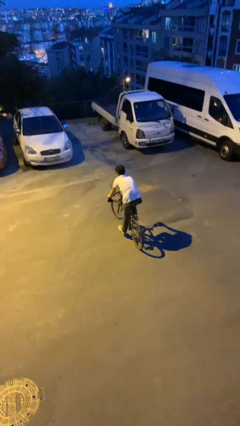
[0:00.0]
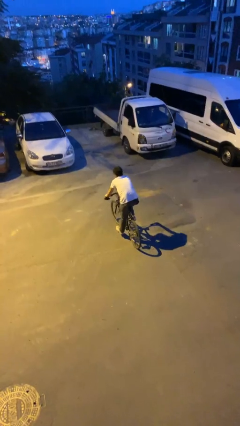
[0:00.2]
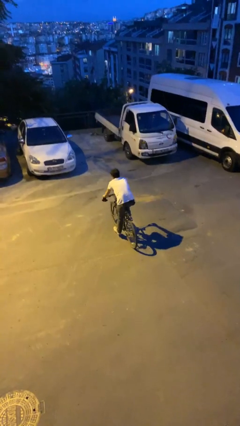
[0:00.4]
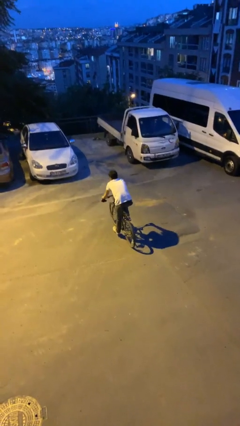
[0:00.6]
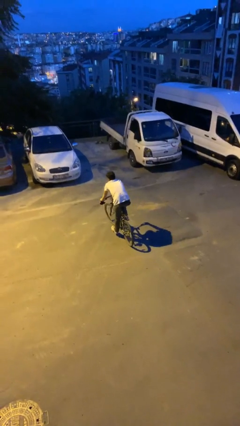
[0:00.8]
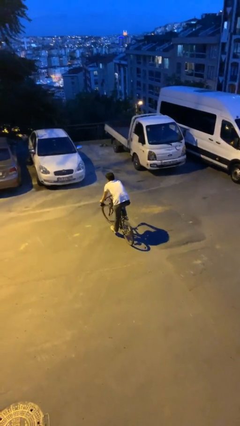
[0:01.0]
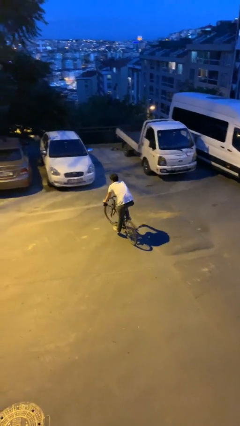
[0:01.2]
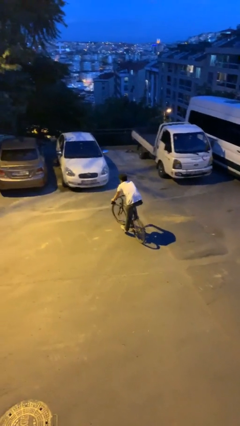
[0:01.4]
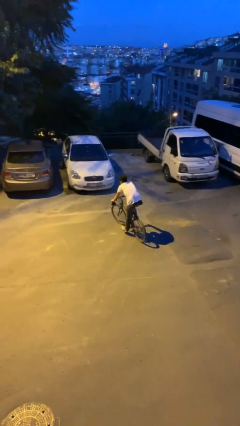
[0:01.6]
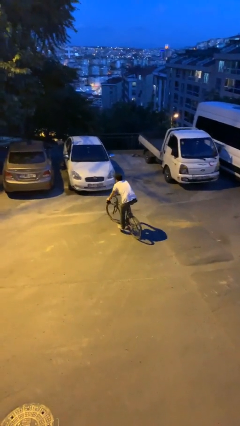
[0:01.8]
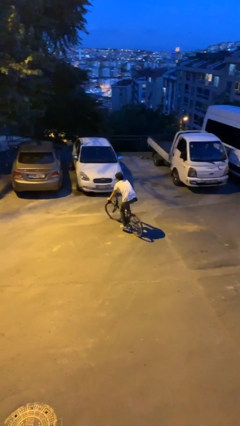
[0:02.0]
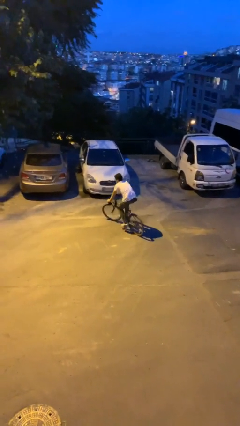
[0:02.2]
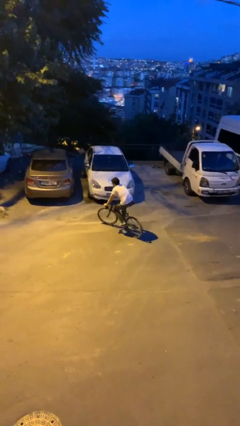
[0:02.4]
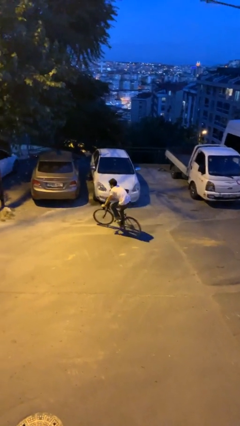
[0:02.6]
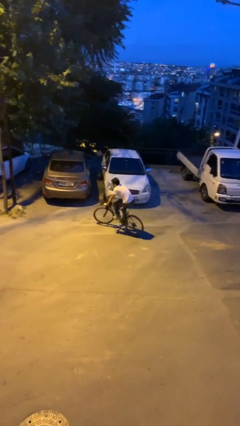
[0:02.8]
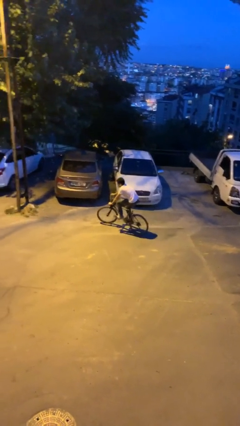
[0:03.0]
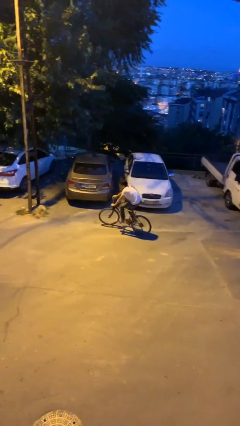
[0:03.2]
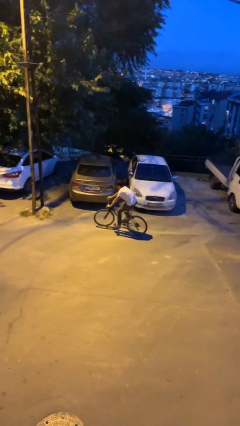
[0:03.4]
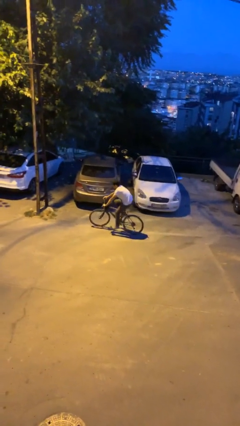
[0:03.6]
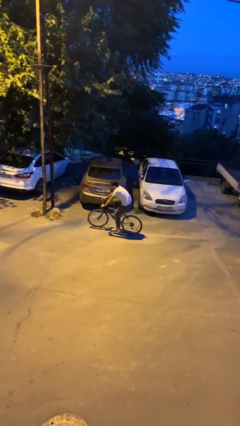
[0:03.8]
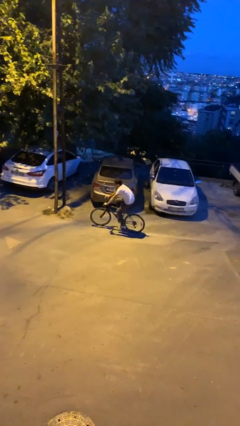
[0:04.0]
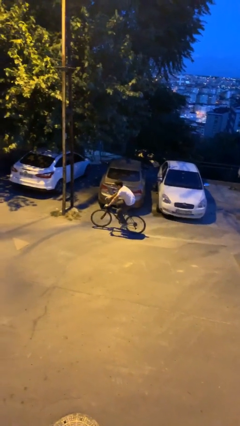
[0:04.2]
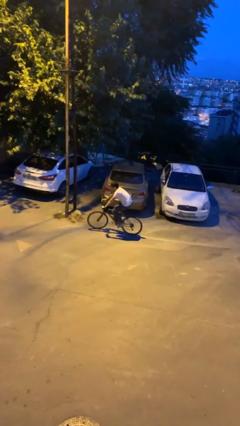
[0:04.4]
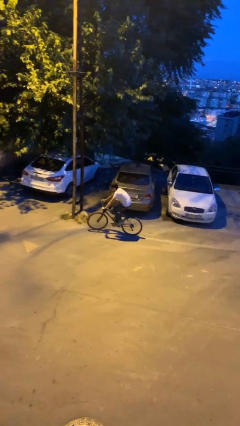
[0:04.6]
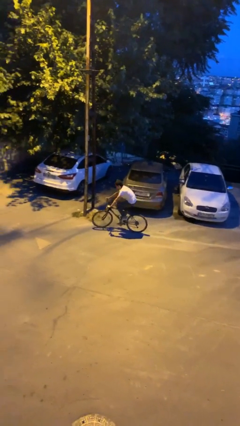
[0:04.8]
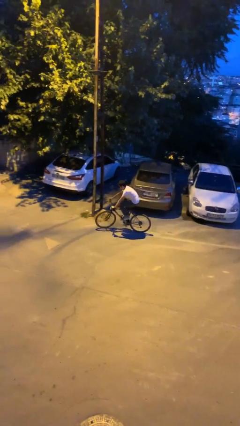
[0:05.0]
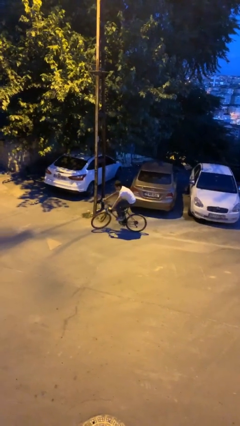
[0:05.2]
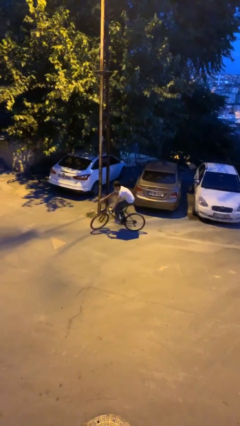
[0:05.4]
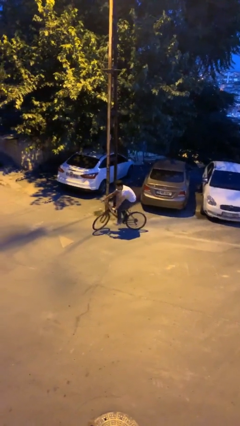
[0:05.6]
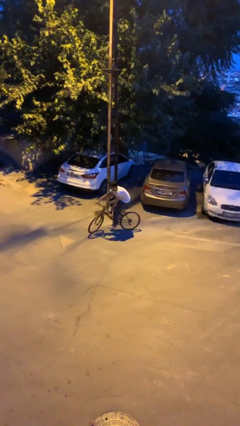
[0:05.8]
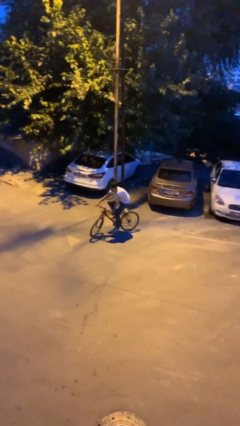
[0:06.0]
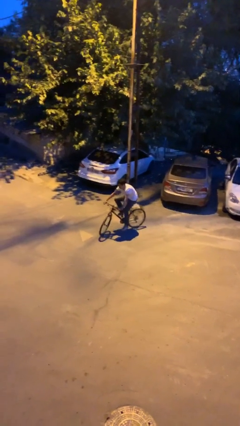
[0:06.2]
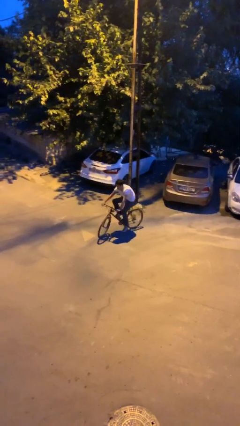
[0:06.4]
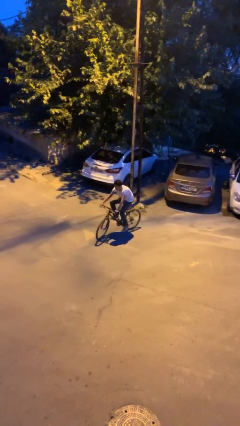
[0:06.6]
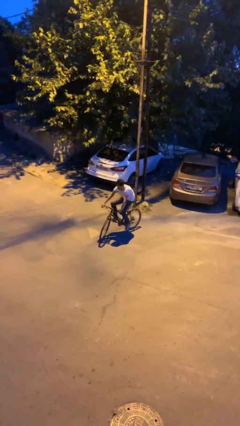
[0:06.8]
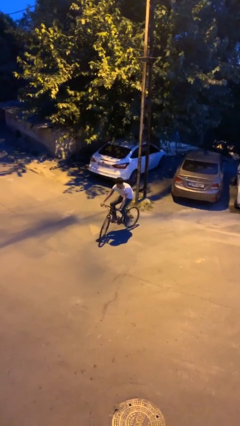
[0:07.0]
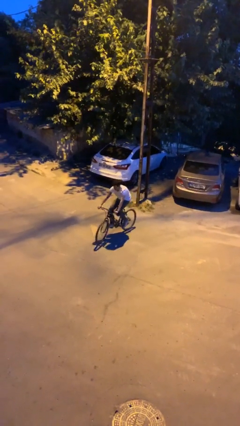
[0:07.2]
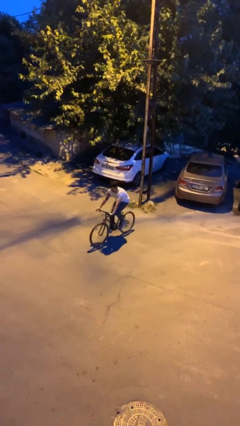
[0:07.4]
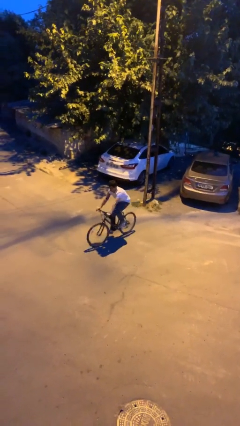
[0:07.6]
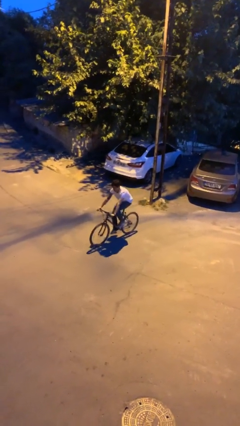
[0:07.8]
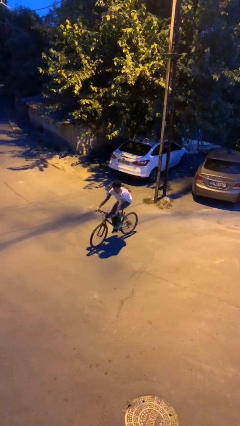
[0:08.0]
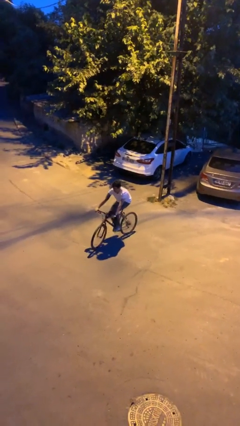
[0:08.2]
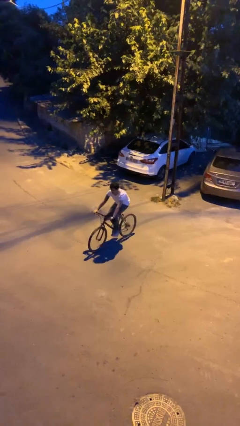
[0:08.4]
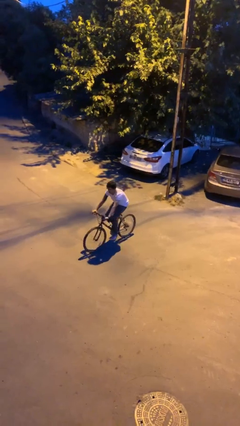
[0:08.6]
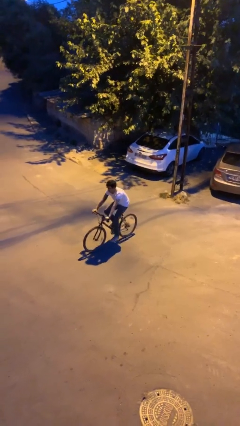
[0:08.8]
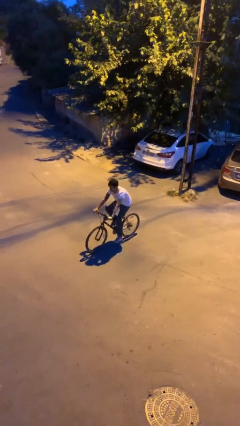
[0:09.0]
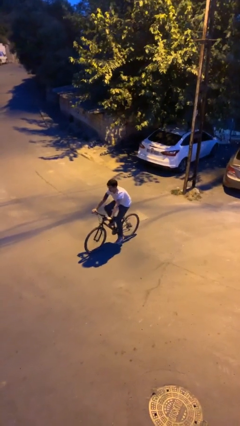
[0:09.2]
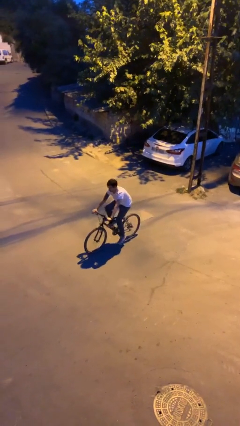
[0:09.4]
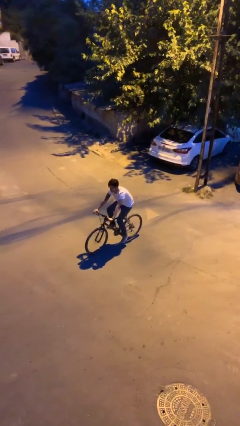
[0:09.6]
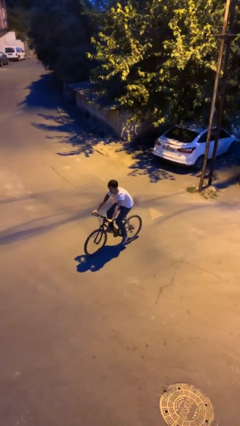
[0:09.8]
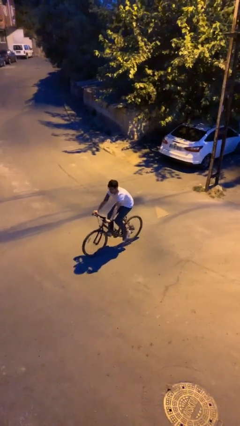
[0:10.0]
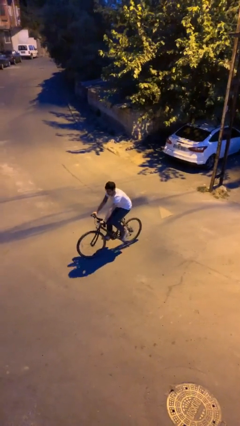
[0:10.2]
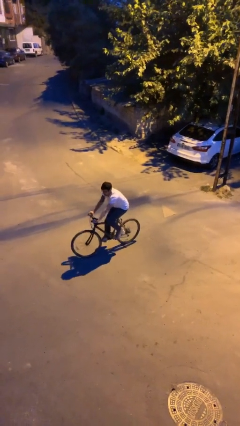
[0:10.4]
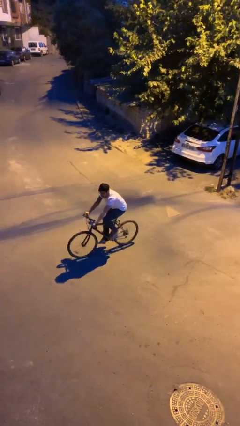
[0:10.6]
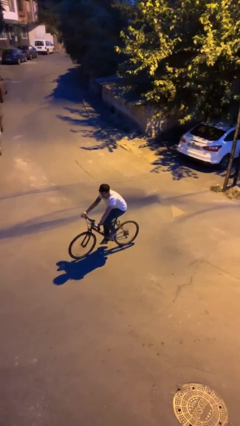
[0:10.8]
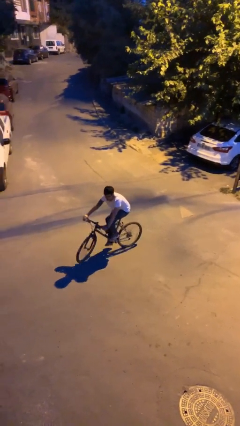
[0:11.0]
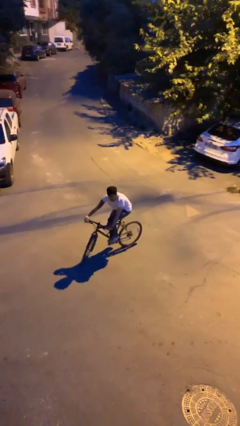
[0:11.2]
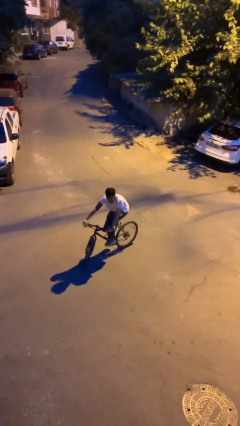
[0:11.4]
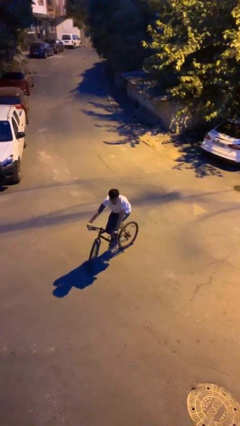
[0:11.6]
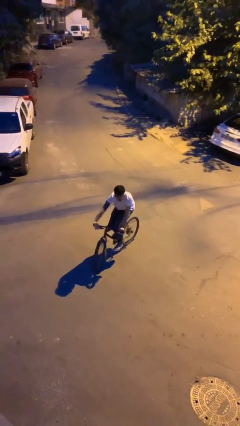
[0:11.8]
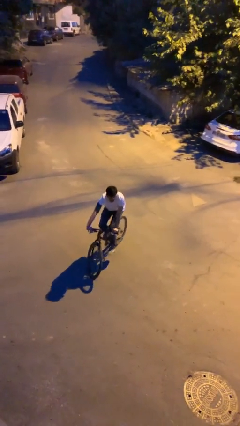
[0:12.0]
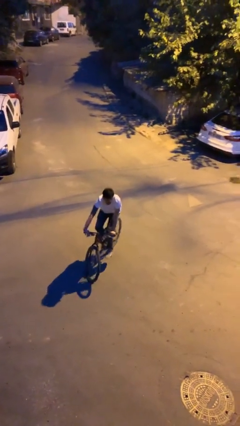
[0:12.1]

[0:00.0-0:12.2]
person rides bicycle

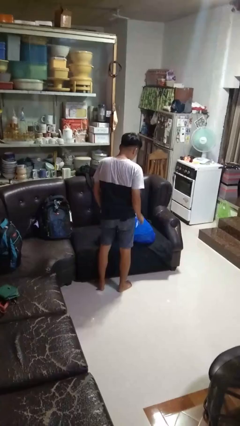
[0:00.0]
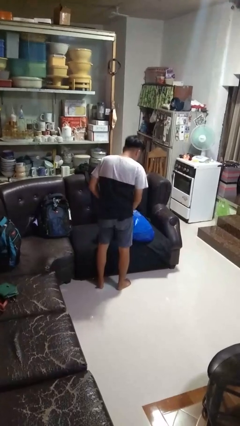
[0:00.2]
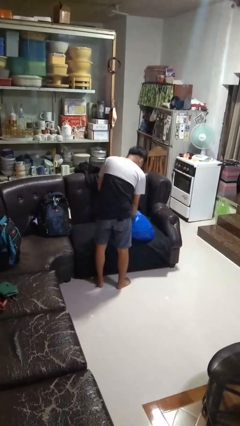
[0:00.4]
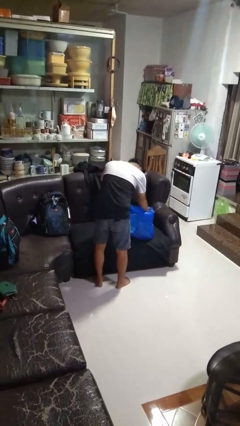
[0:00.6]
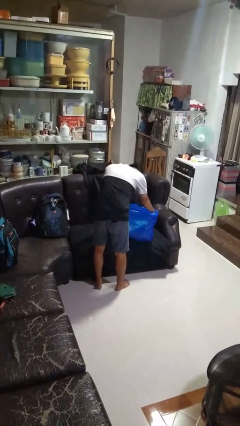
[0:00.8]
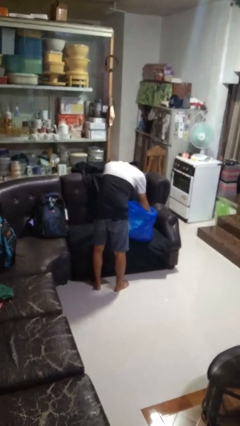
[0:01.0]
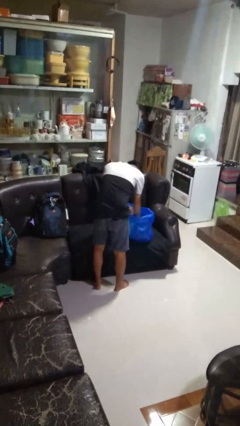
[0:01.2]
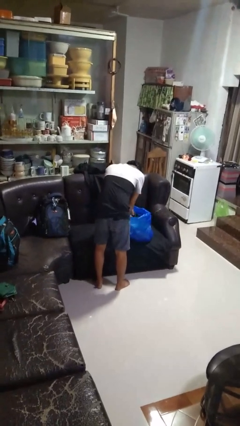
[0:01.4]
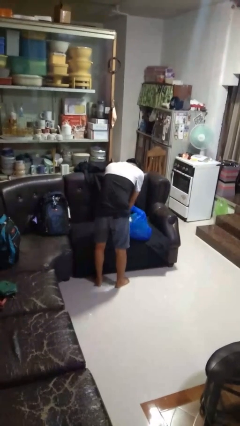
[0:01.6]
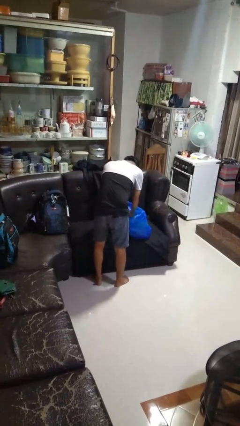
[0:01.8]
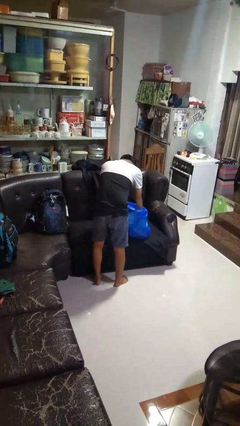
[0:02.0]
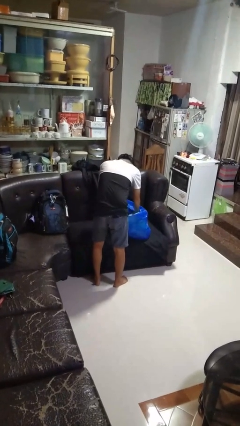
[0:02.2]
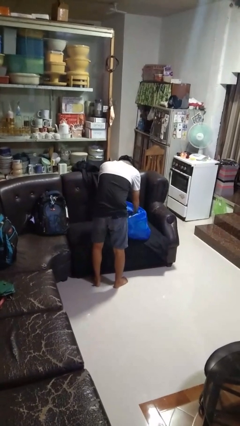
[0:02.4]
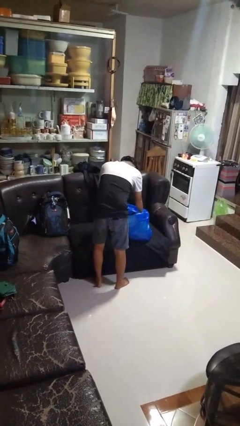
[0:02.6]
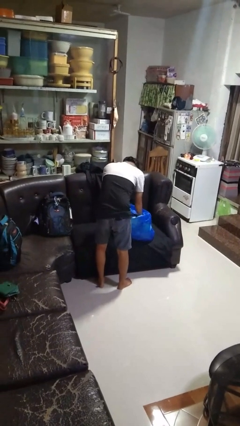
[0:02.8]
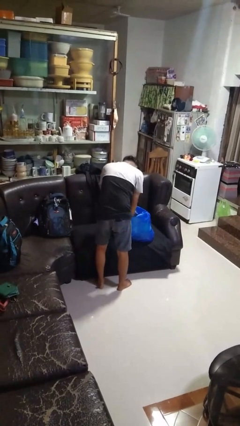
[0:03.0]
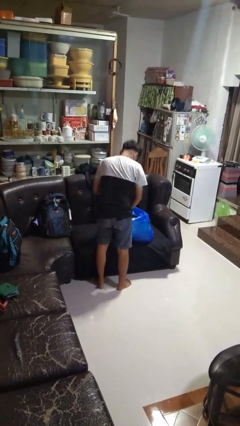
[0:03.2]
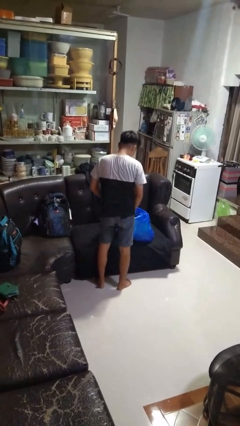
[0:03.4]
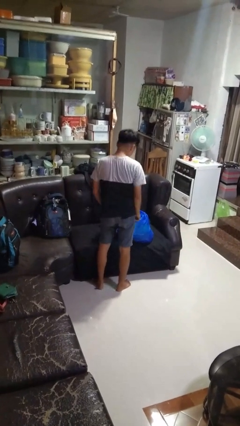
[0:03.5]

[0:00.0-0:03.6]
person searches in bag

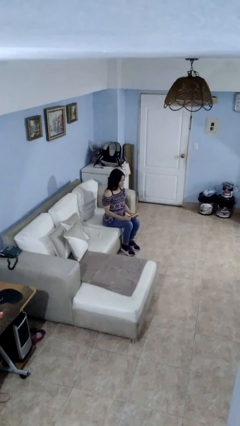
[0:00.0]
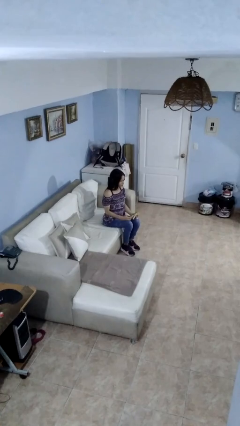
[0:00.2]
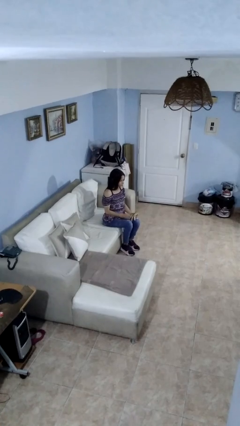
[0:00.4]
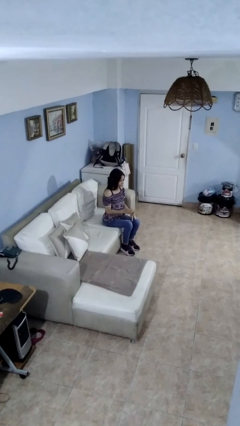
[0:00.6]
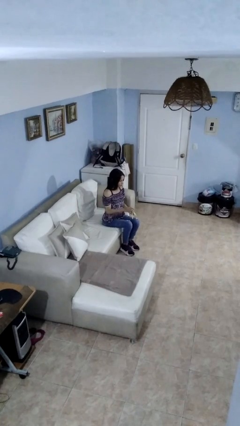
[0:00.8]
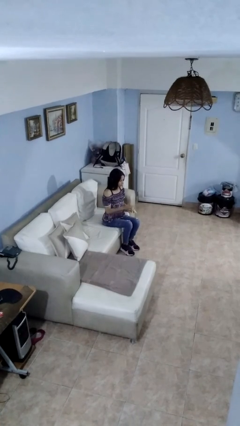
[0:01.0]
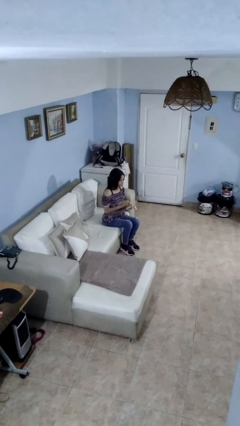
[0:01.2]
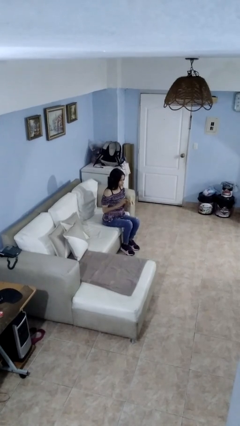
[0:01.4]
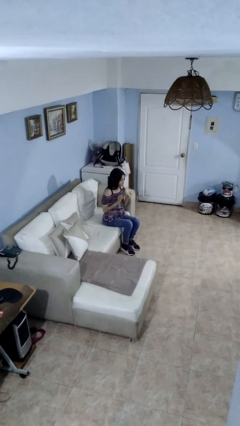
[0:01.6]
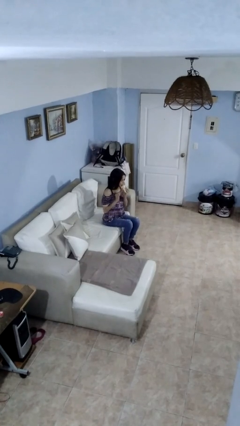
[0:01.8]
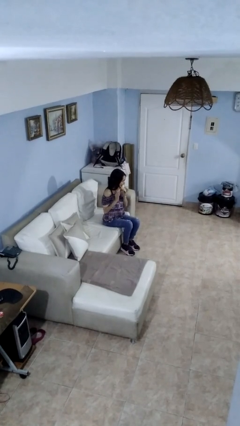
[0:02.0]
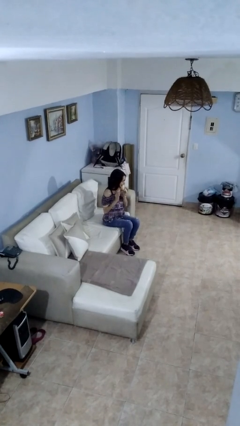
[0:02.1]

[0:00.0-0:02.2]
person eats banana
